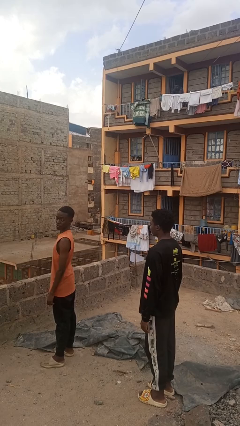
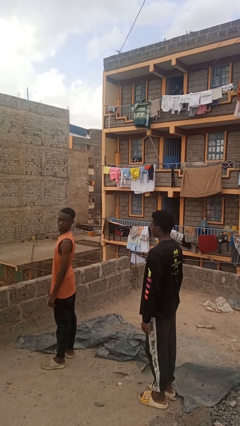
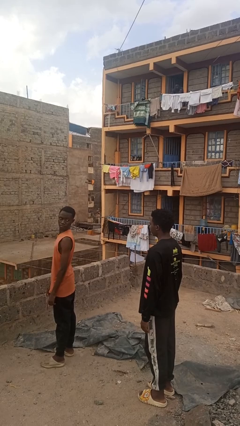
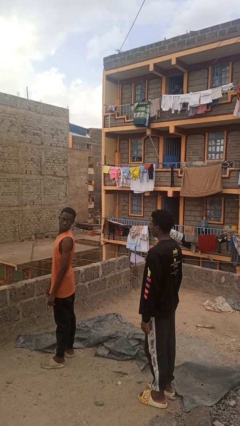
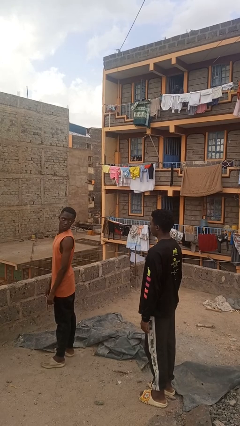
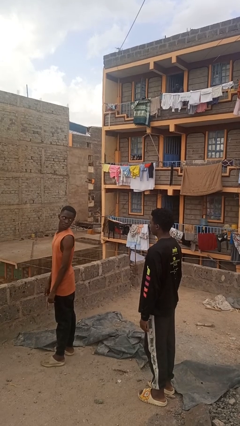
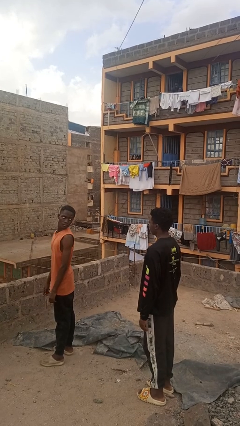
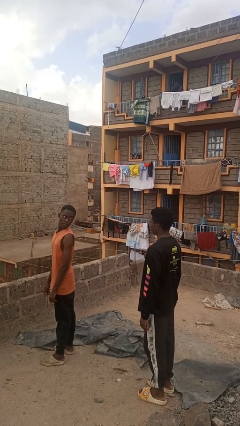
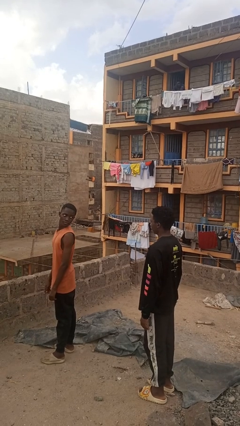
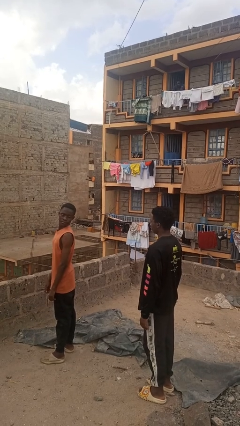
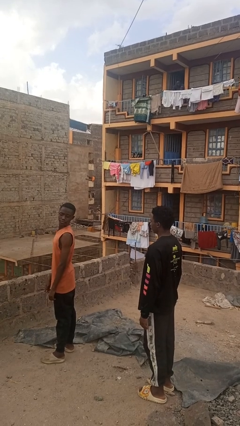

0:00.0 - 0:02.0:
person looks over shoulder

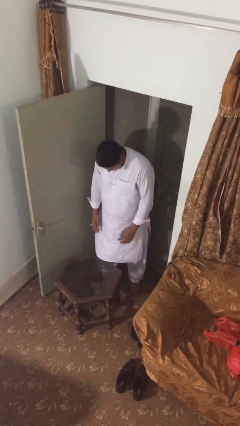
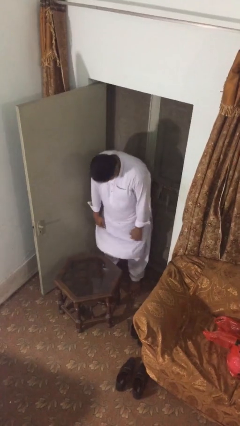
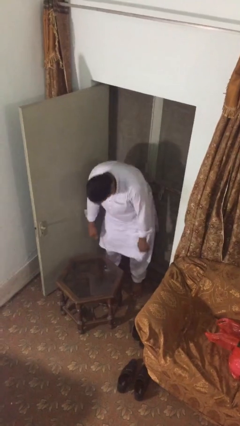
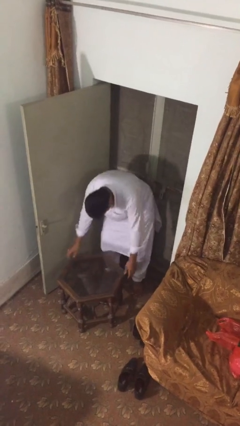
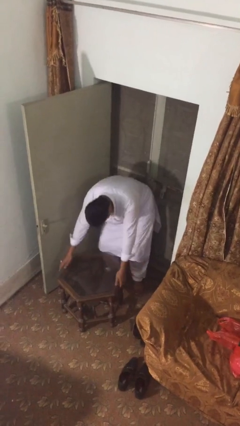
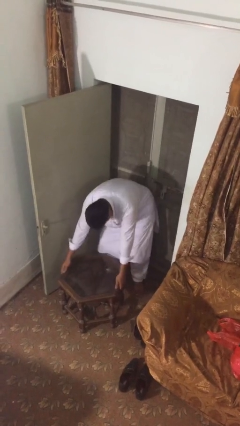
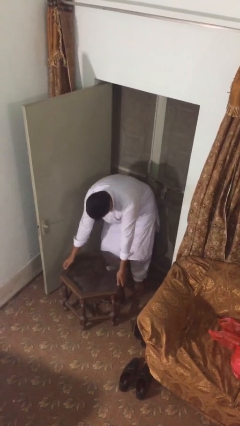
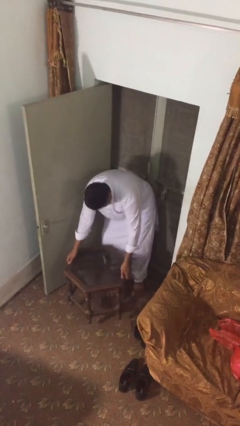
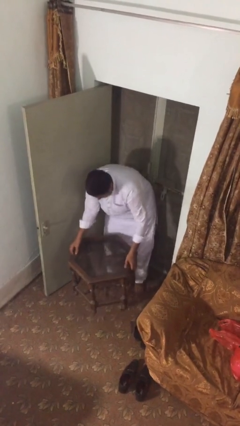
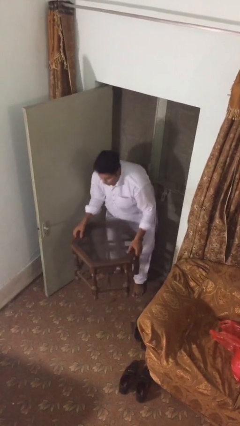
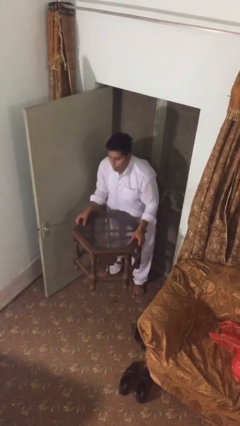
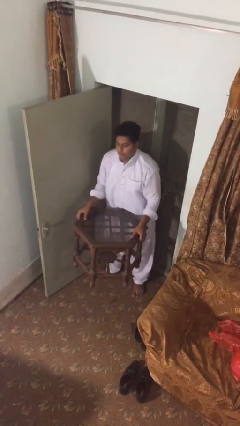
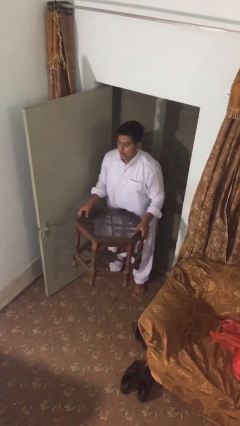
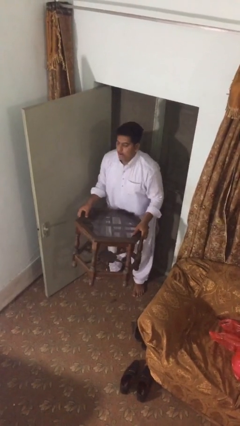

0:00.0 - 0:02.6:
person picks up object from floor

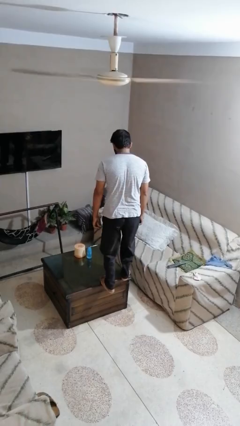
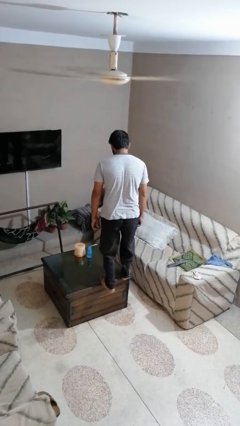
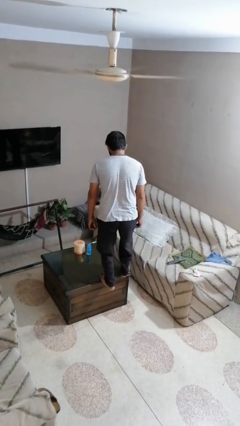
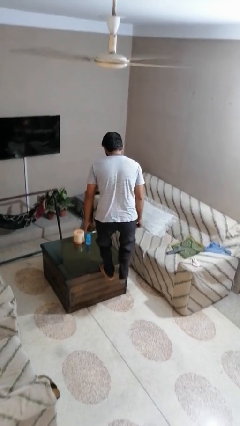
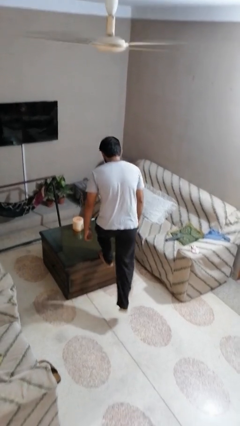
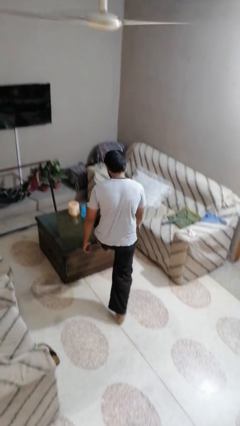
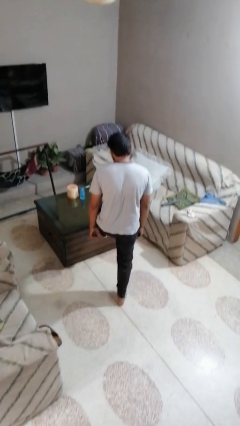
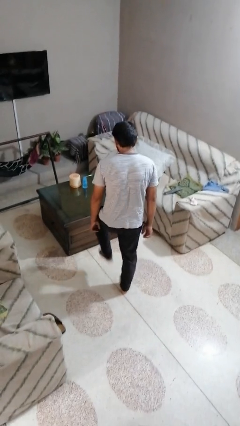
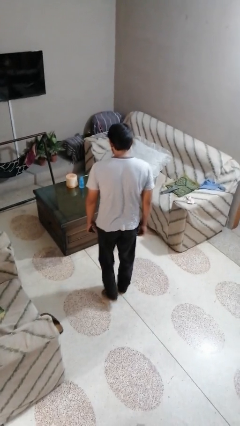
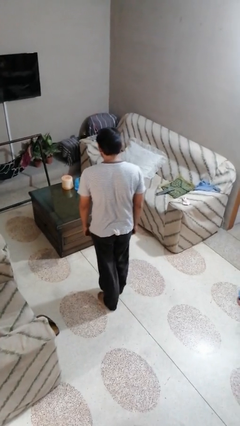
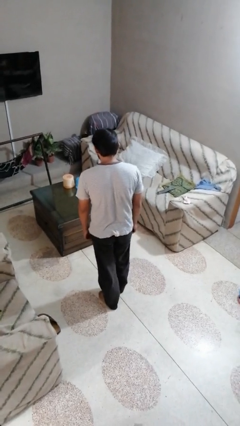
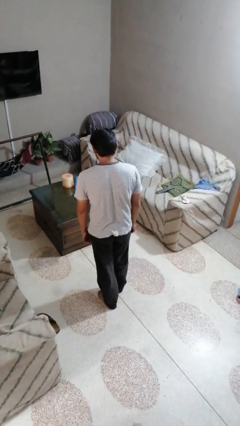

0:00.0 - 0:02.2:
person climbs off table

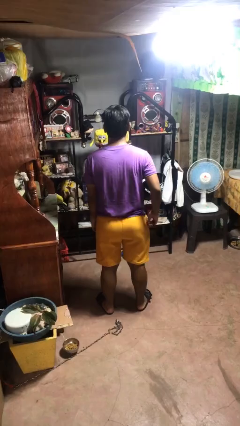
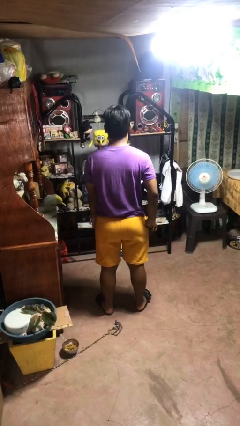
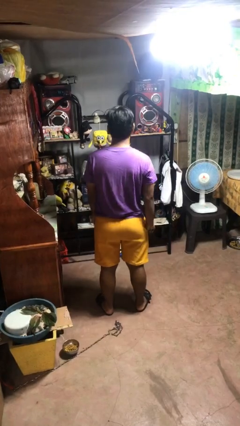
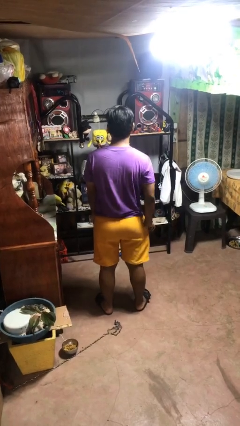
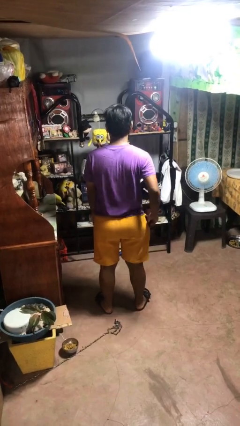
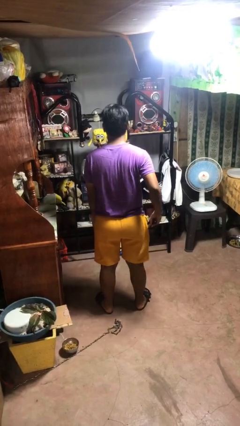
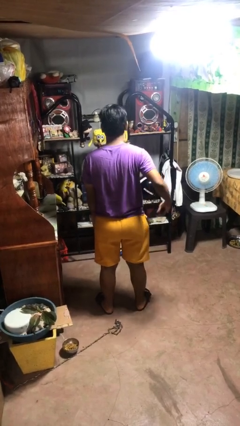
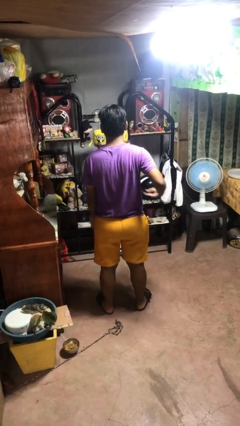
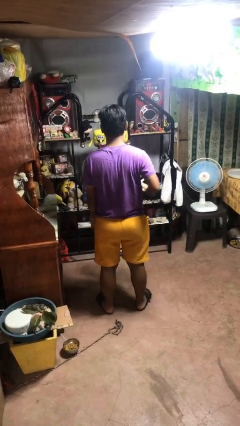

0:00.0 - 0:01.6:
person takes phone from pocket

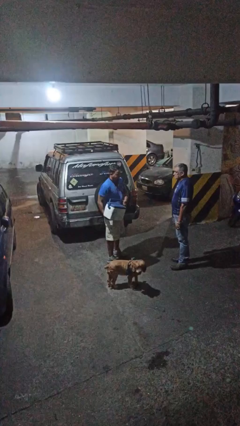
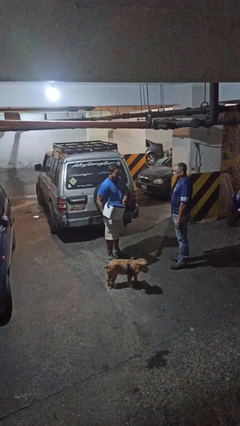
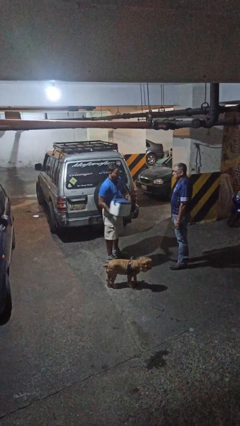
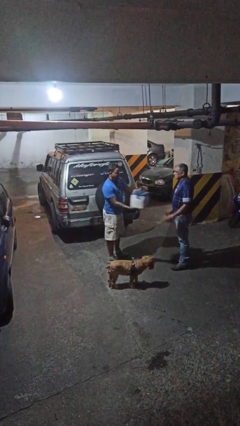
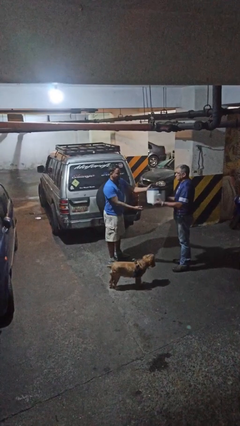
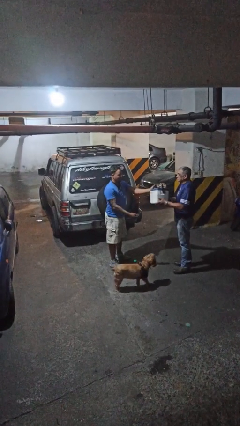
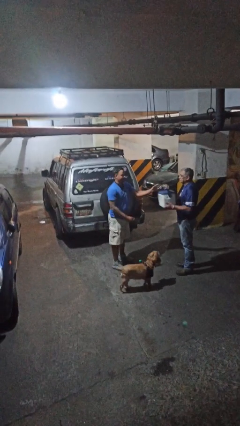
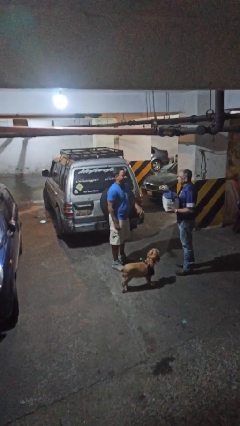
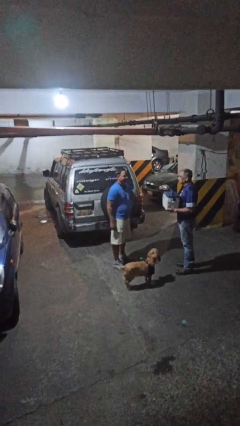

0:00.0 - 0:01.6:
person transfers object to person

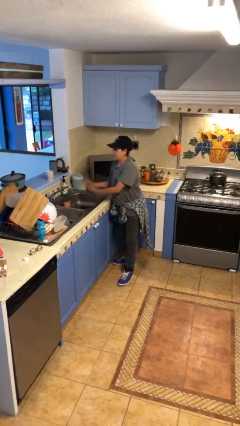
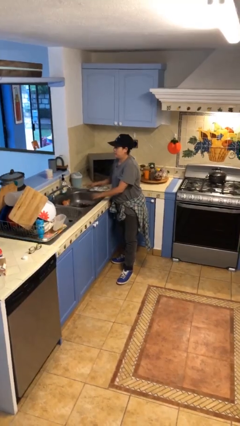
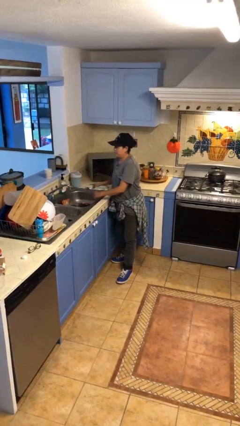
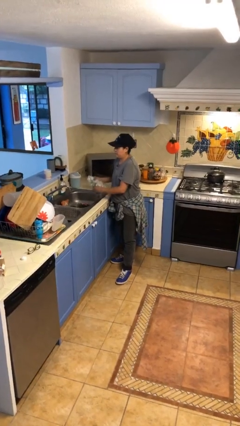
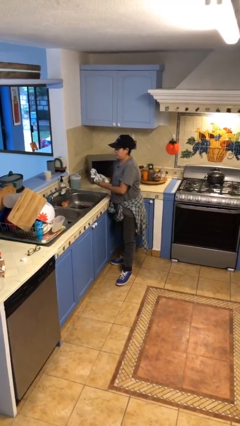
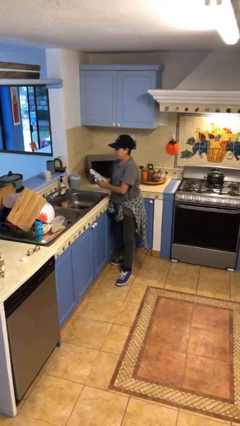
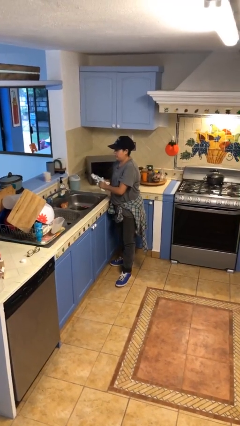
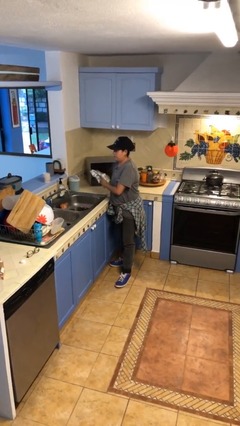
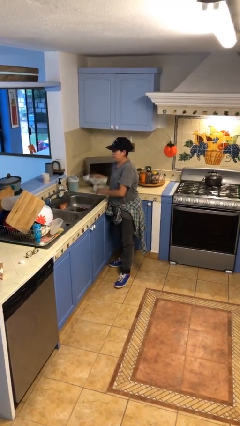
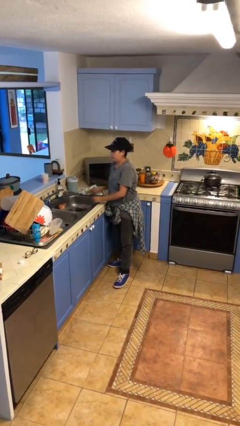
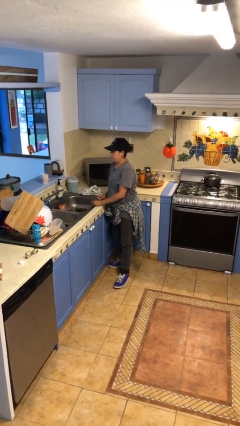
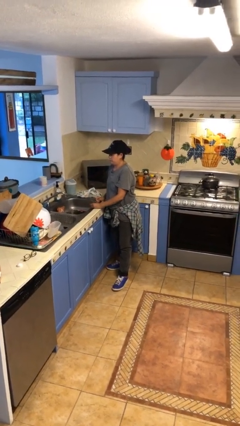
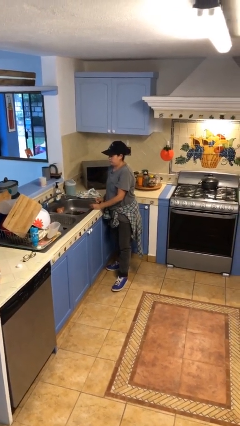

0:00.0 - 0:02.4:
person dries hands with towel

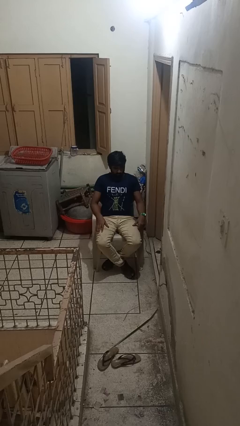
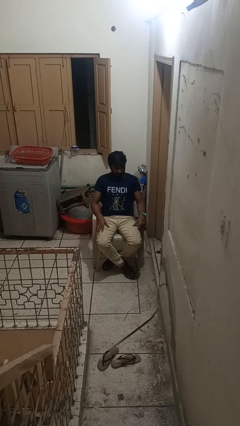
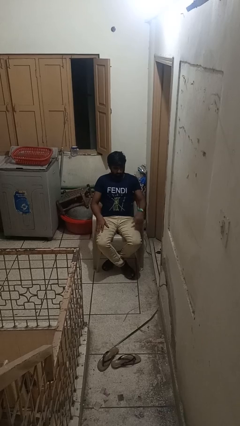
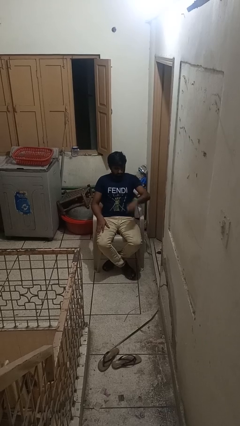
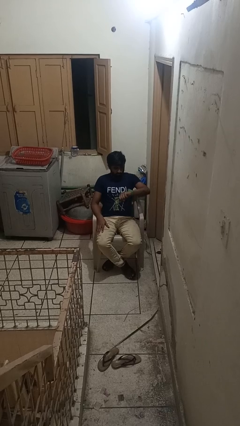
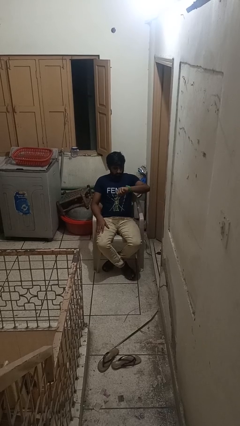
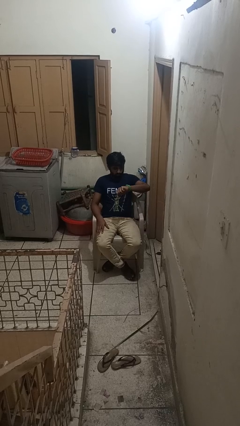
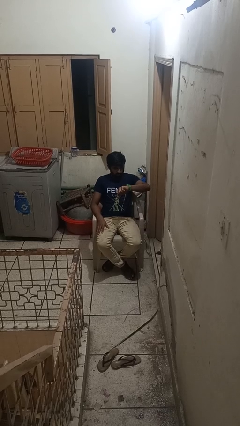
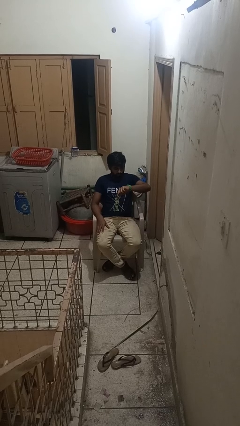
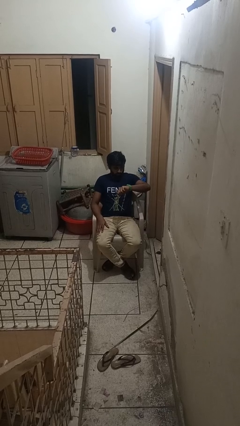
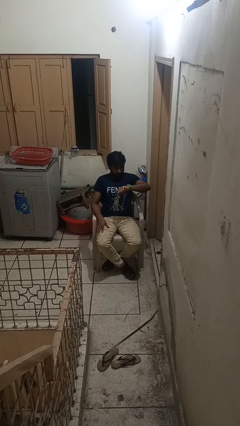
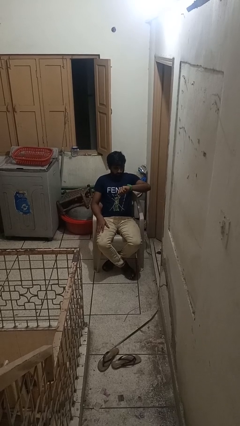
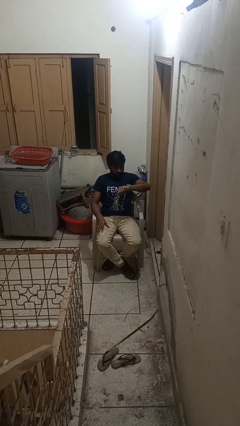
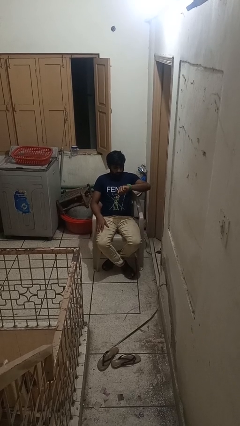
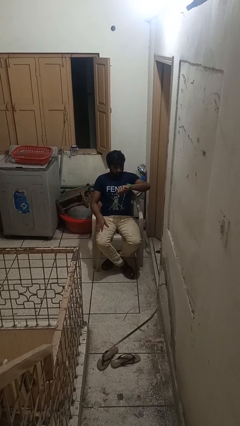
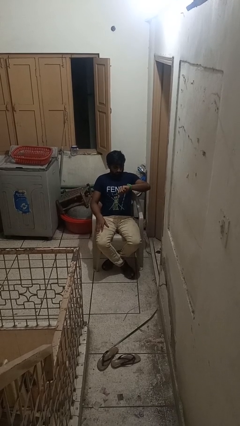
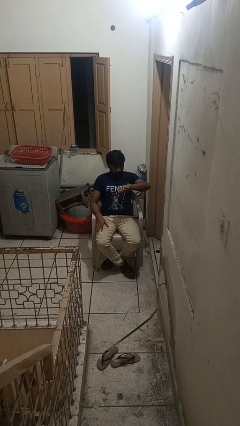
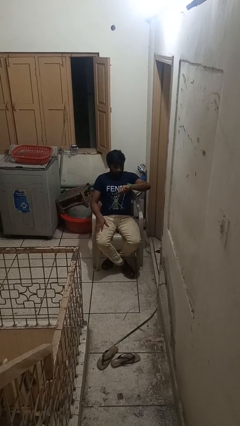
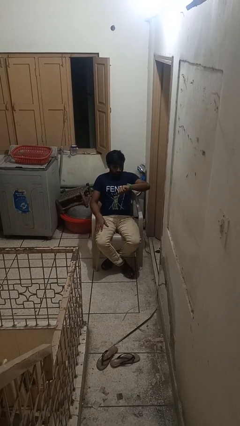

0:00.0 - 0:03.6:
person looks at wristwatch

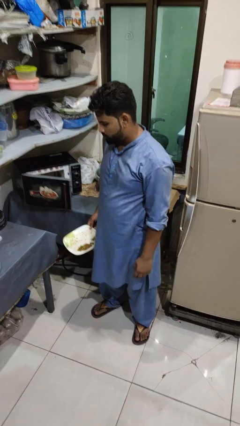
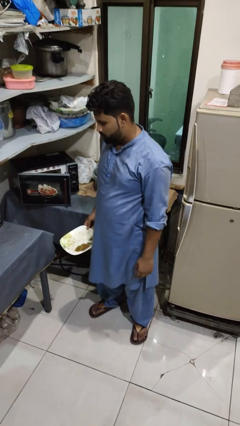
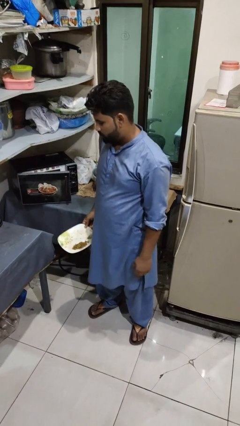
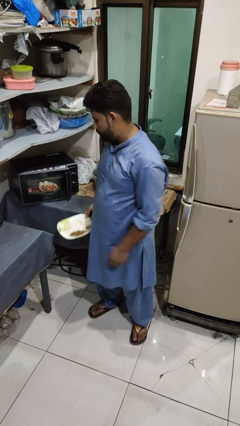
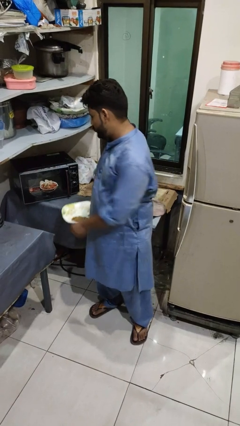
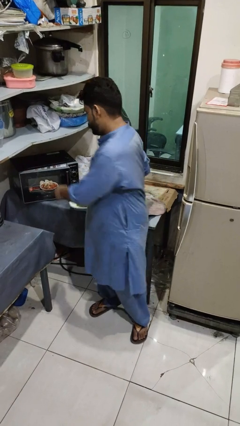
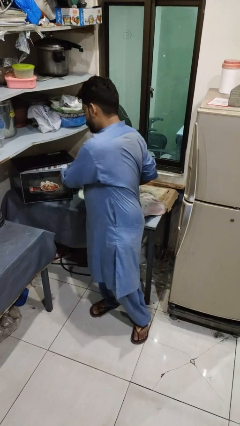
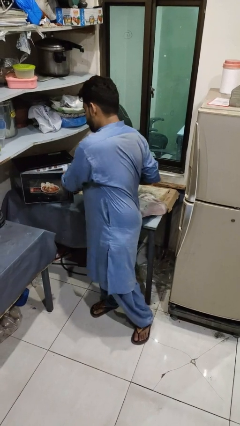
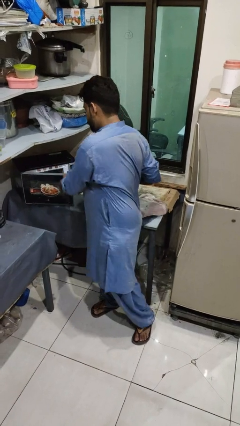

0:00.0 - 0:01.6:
person puts object into microwave
